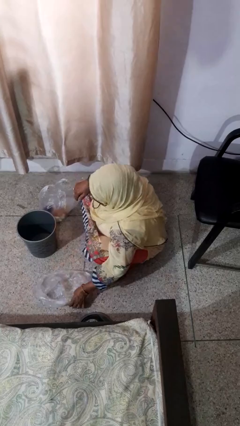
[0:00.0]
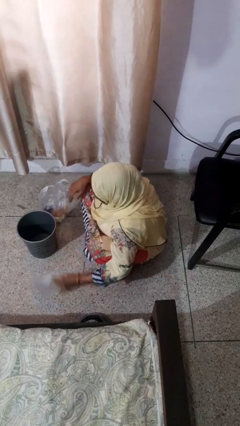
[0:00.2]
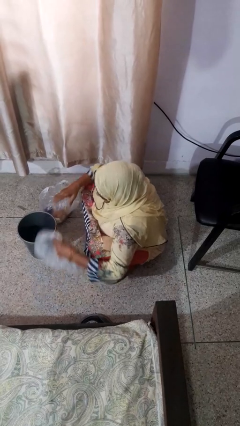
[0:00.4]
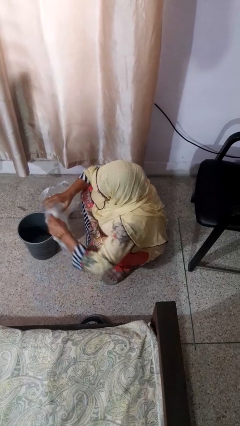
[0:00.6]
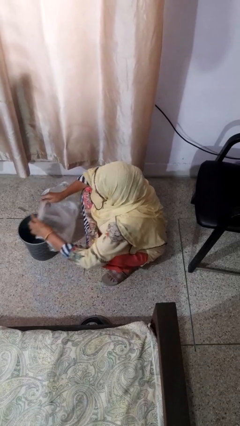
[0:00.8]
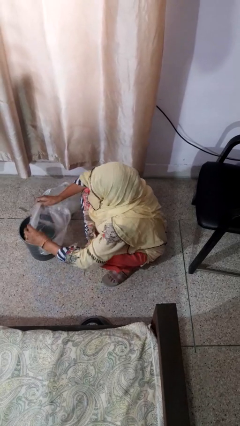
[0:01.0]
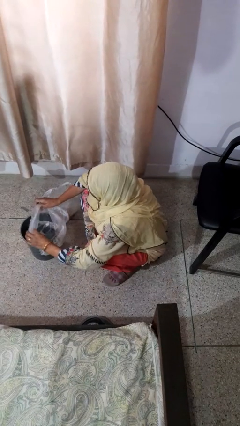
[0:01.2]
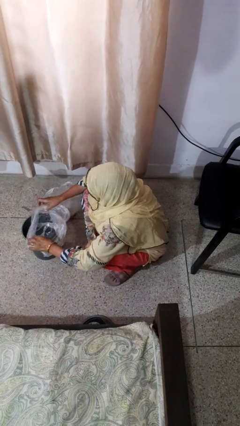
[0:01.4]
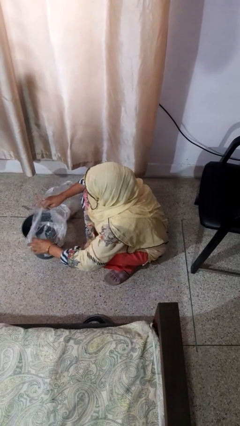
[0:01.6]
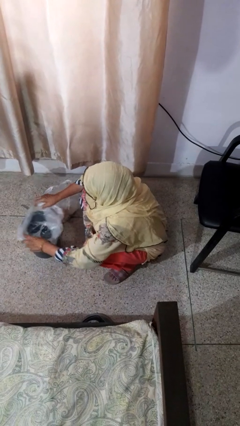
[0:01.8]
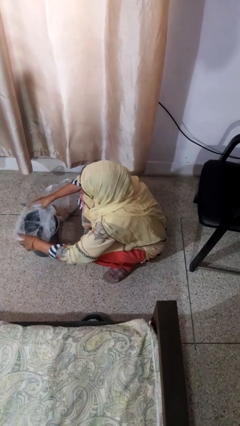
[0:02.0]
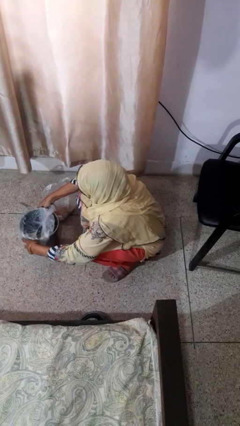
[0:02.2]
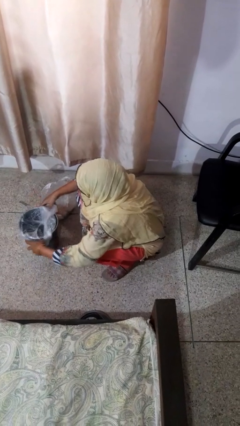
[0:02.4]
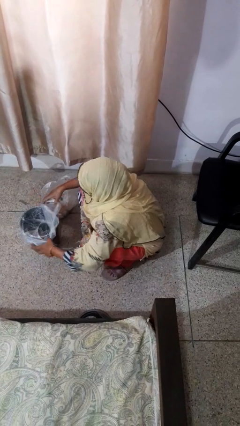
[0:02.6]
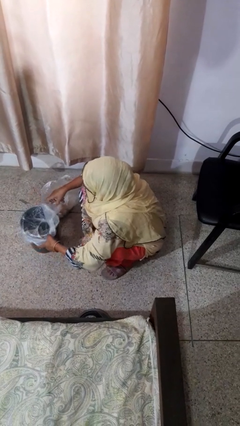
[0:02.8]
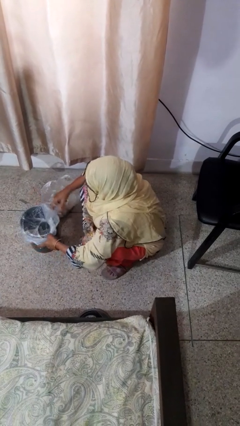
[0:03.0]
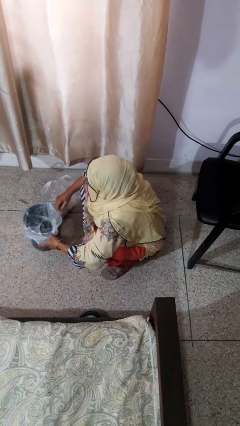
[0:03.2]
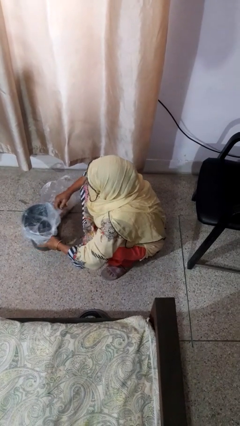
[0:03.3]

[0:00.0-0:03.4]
person inserts trashbag into trashcan

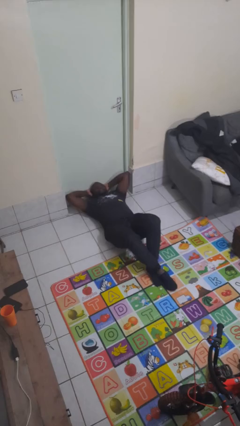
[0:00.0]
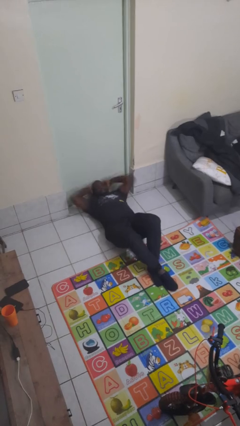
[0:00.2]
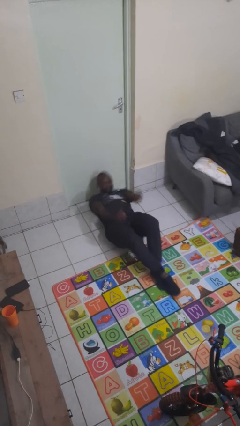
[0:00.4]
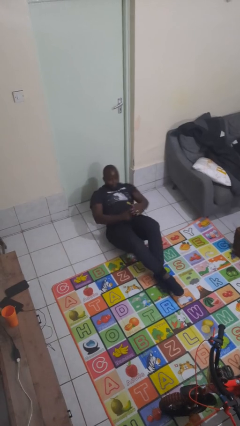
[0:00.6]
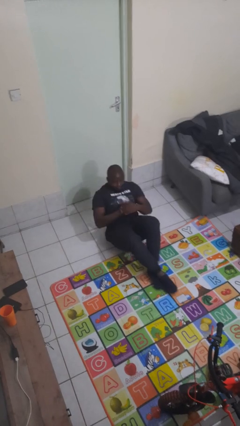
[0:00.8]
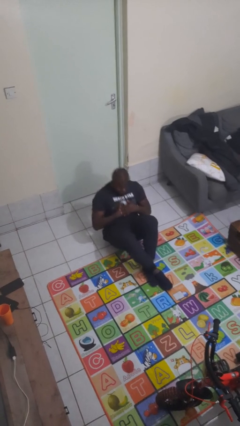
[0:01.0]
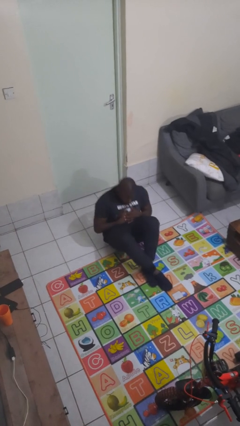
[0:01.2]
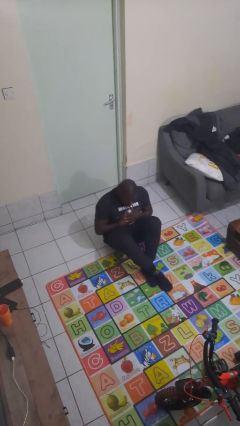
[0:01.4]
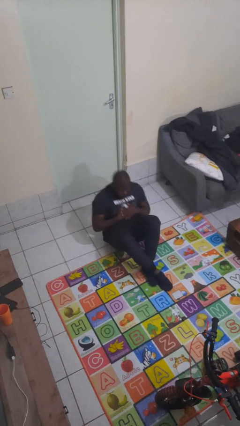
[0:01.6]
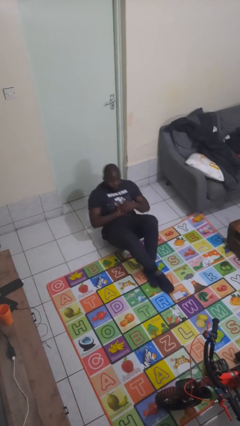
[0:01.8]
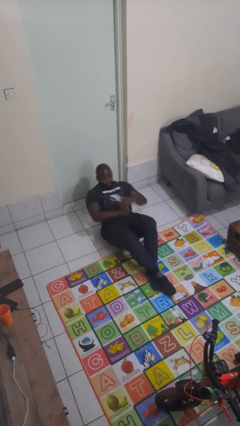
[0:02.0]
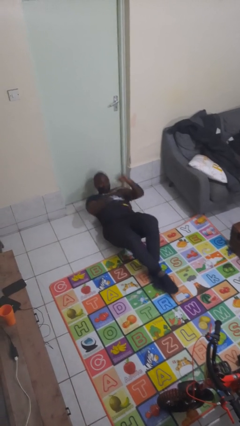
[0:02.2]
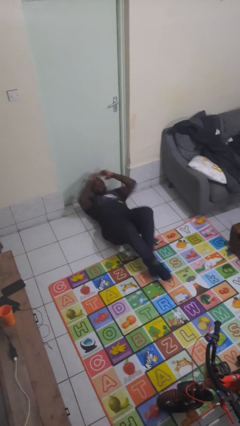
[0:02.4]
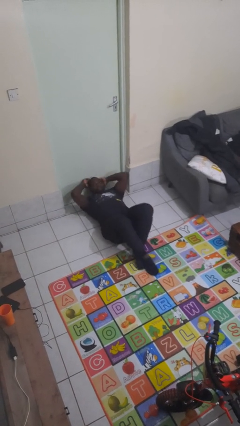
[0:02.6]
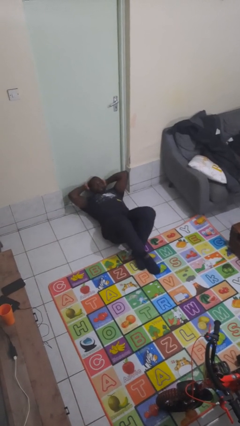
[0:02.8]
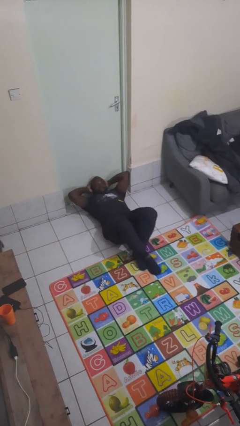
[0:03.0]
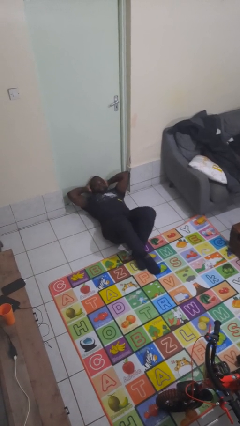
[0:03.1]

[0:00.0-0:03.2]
person exercises with situp

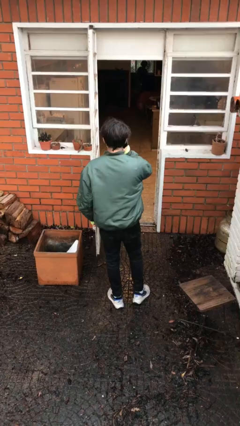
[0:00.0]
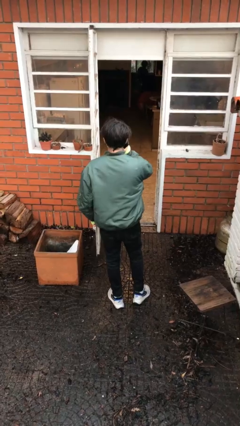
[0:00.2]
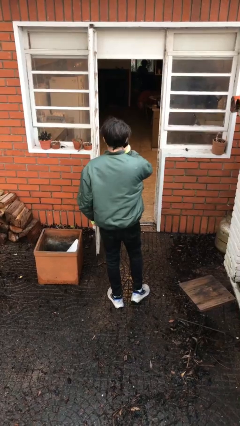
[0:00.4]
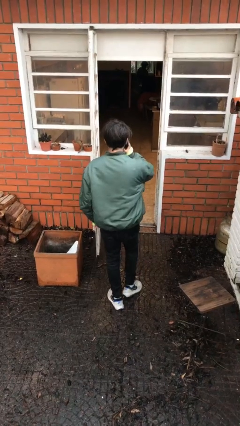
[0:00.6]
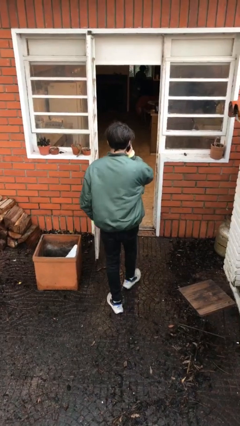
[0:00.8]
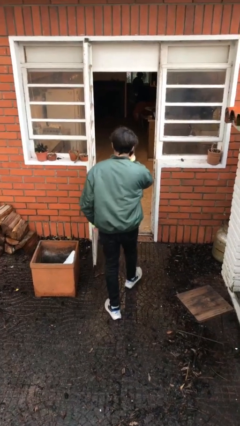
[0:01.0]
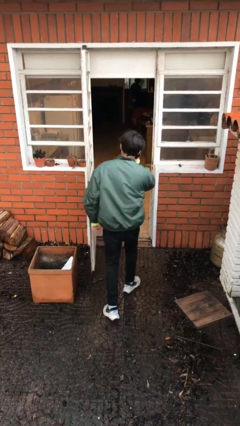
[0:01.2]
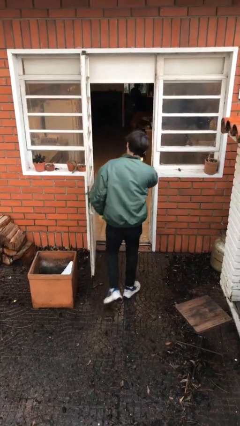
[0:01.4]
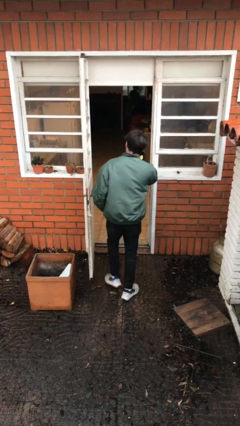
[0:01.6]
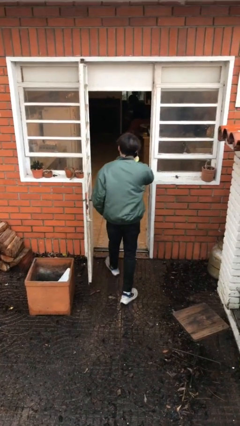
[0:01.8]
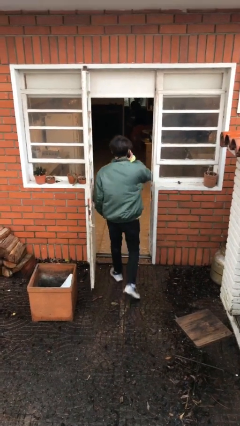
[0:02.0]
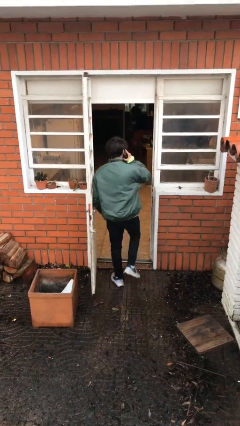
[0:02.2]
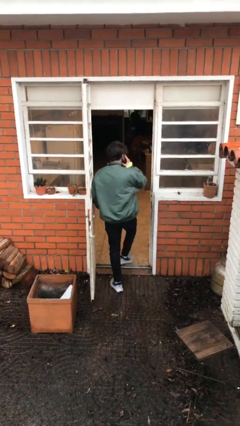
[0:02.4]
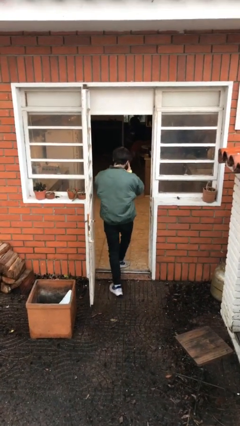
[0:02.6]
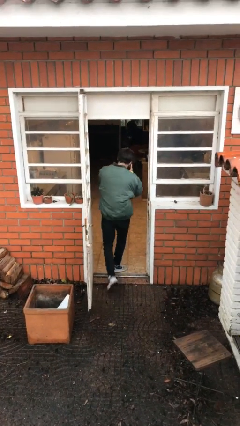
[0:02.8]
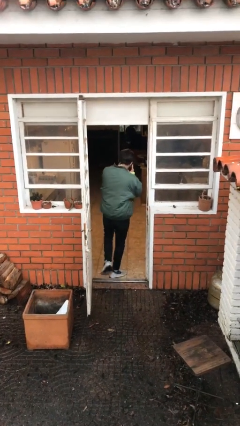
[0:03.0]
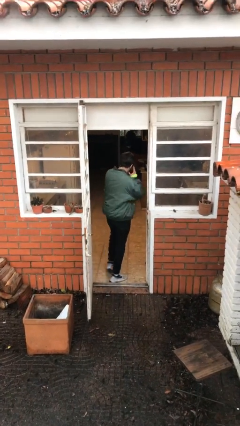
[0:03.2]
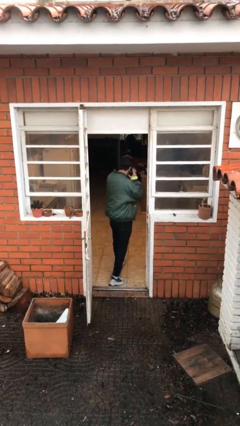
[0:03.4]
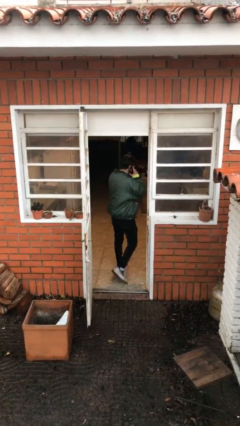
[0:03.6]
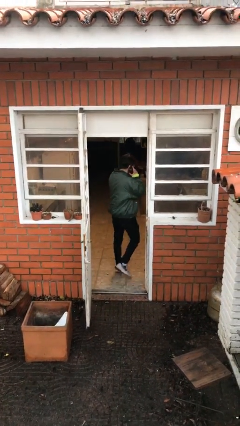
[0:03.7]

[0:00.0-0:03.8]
person exits scene through structure

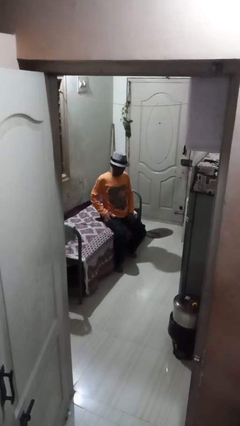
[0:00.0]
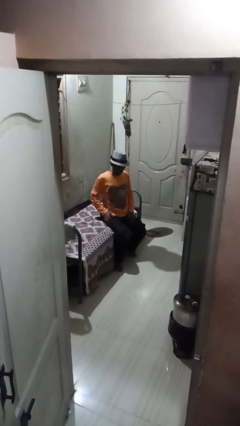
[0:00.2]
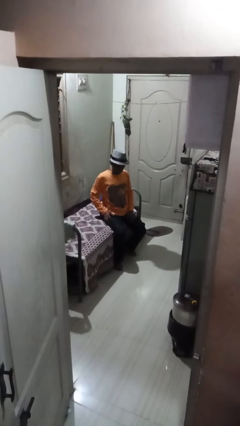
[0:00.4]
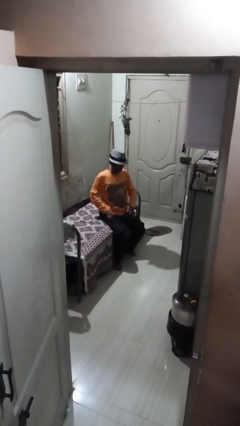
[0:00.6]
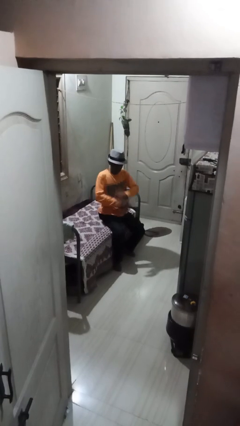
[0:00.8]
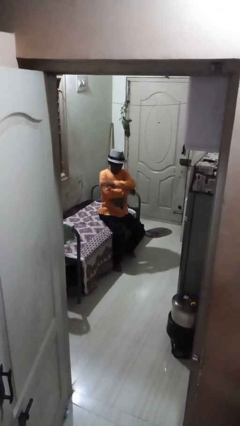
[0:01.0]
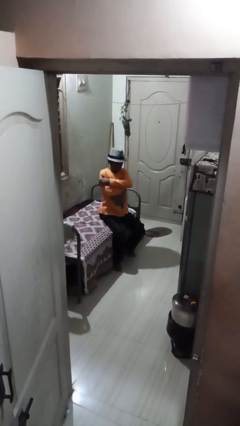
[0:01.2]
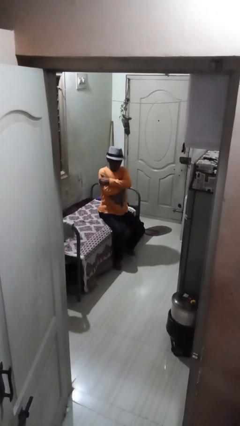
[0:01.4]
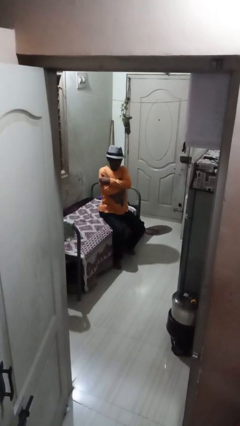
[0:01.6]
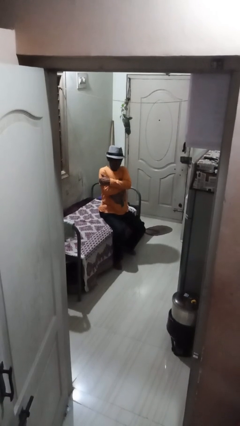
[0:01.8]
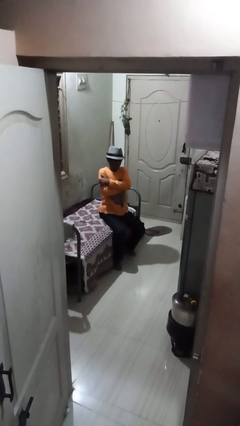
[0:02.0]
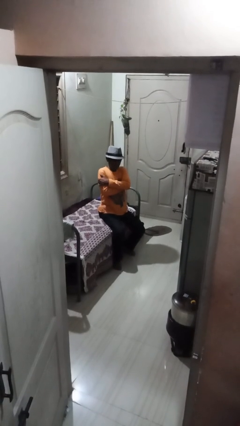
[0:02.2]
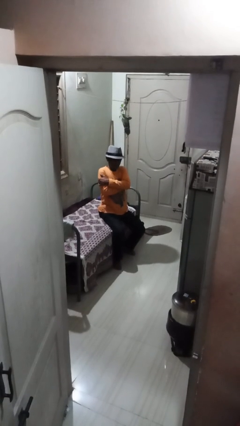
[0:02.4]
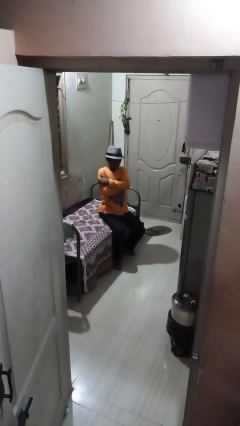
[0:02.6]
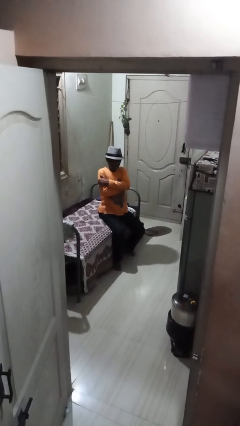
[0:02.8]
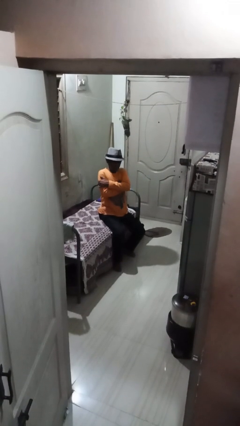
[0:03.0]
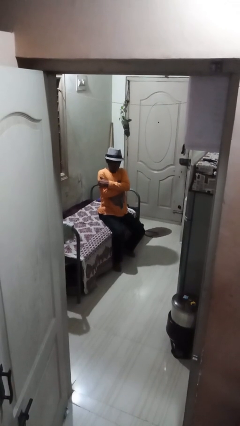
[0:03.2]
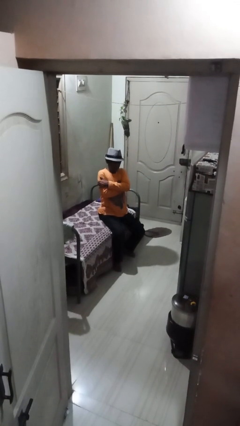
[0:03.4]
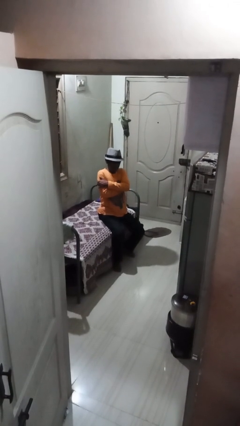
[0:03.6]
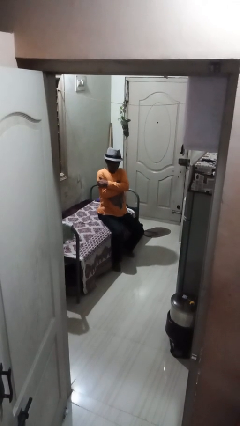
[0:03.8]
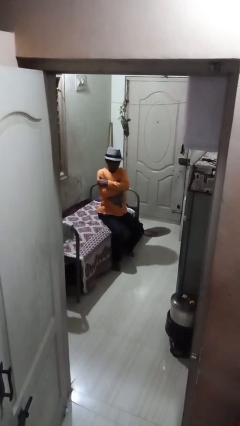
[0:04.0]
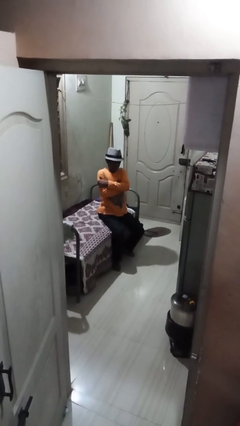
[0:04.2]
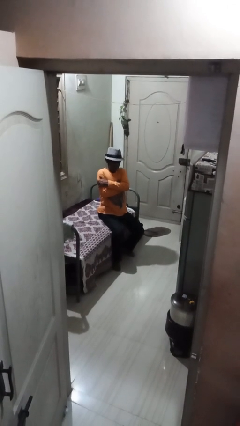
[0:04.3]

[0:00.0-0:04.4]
person crosses arms

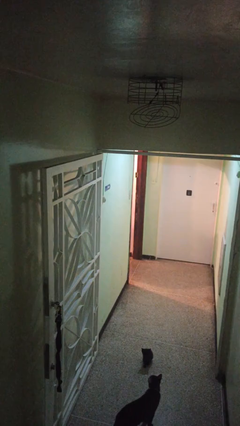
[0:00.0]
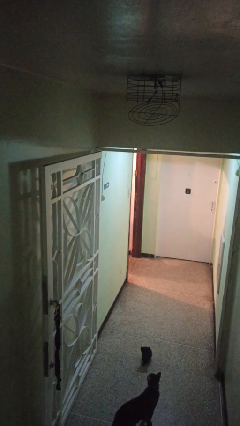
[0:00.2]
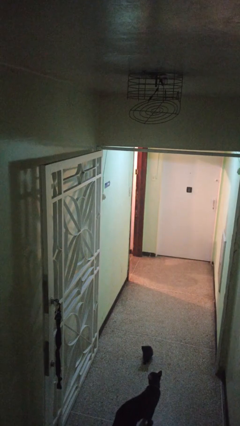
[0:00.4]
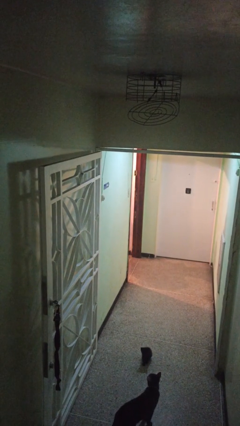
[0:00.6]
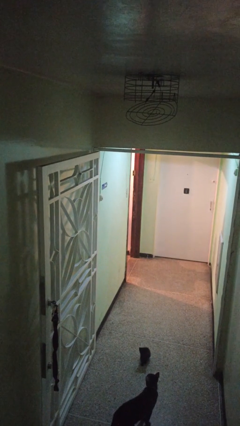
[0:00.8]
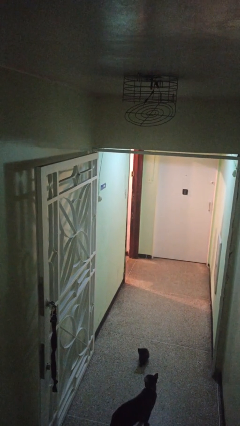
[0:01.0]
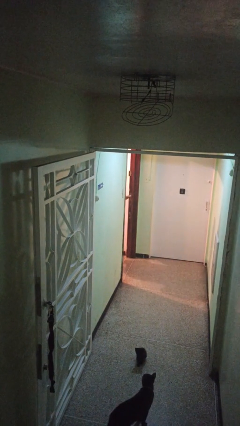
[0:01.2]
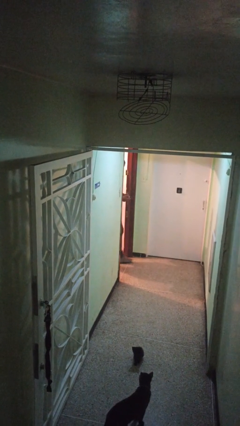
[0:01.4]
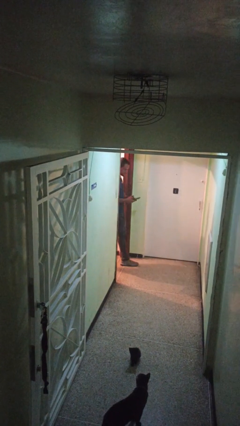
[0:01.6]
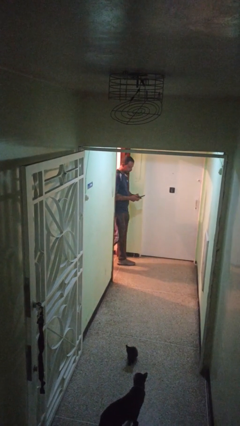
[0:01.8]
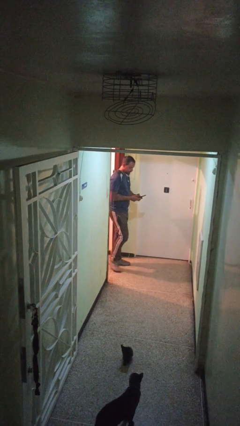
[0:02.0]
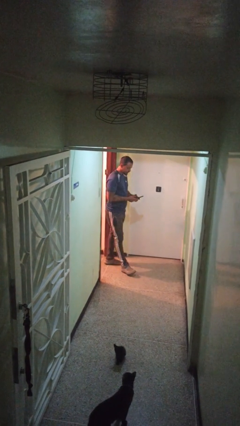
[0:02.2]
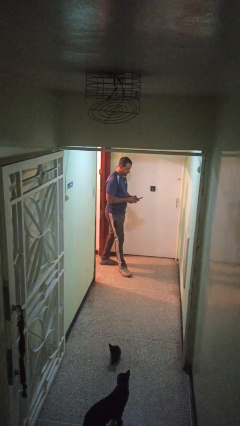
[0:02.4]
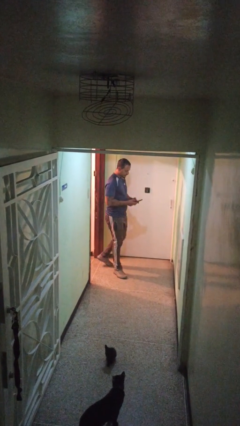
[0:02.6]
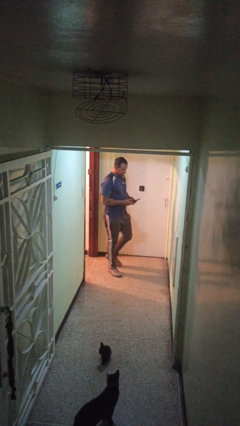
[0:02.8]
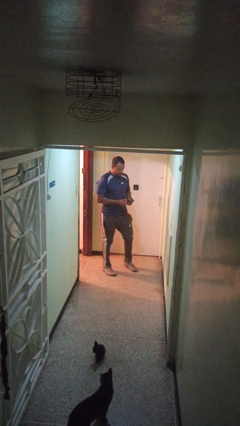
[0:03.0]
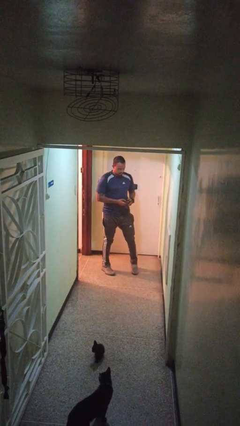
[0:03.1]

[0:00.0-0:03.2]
person enters scene through structure
